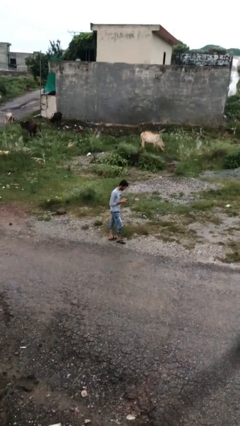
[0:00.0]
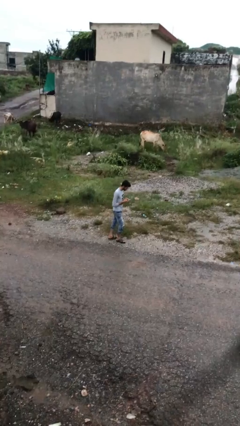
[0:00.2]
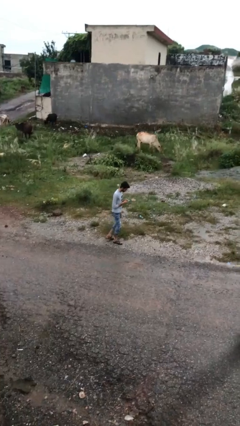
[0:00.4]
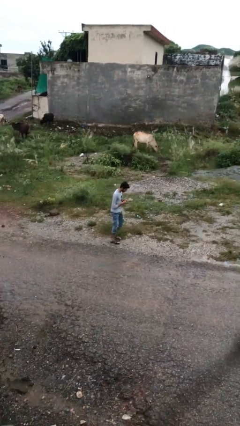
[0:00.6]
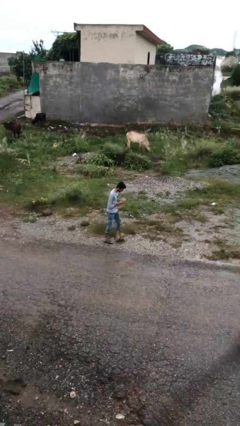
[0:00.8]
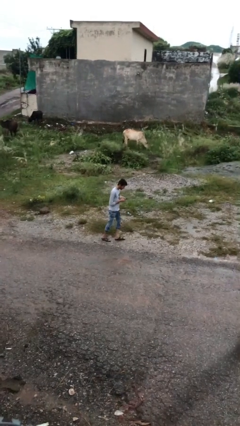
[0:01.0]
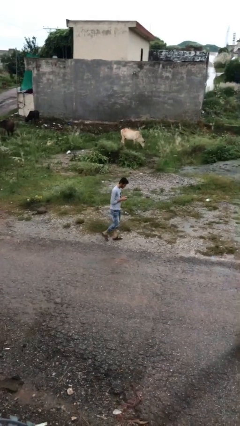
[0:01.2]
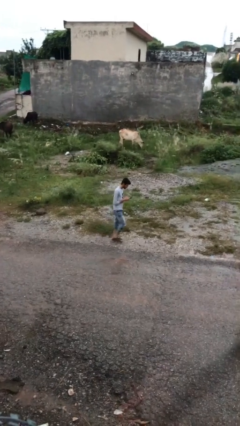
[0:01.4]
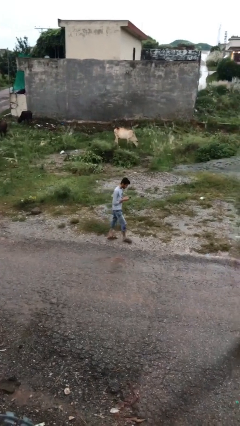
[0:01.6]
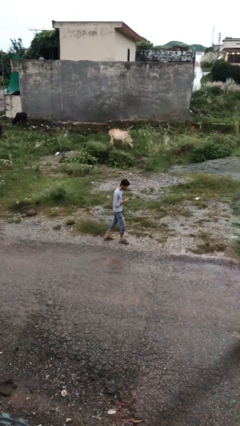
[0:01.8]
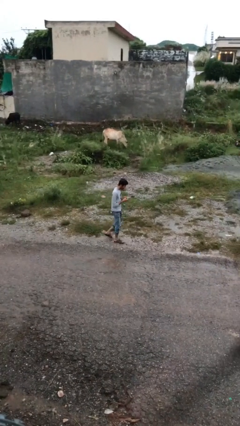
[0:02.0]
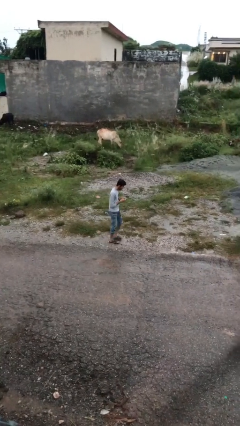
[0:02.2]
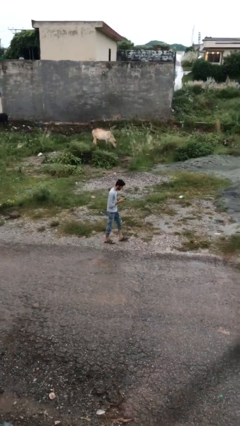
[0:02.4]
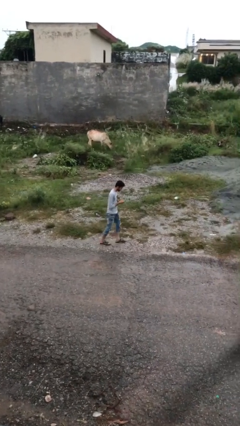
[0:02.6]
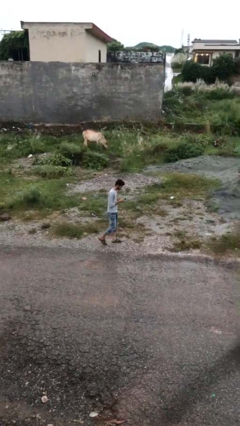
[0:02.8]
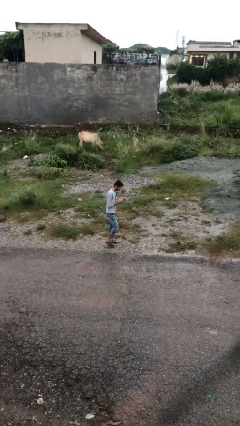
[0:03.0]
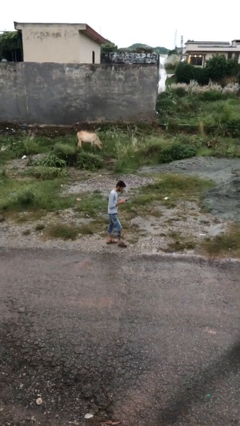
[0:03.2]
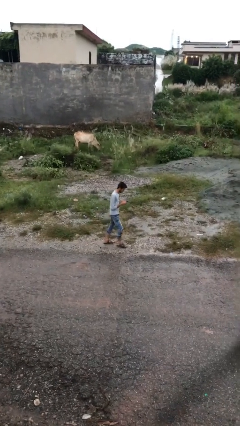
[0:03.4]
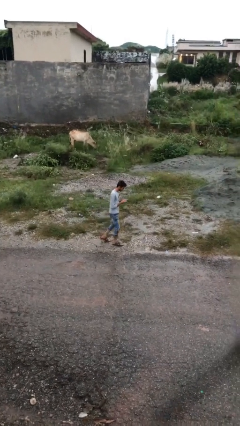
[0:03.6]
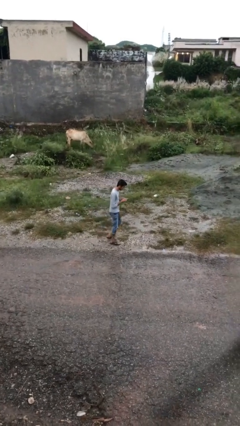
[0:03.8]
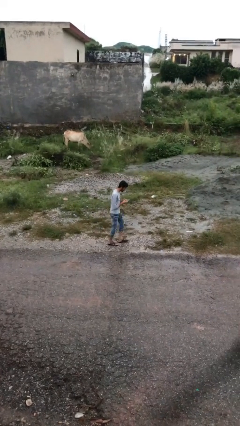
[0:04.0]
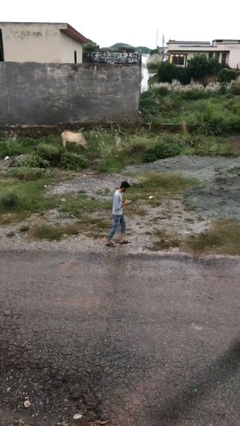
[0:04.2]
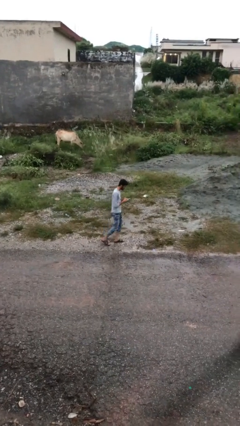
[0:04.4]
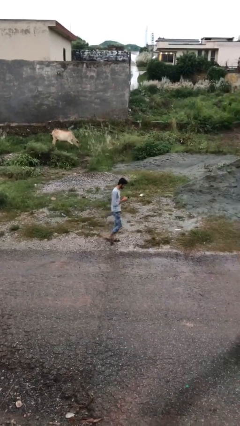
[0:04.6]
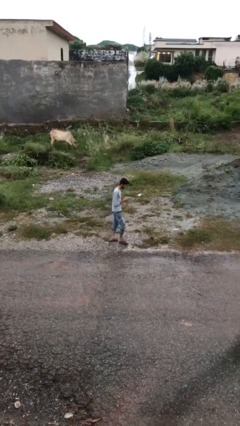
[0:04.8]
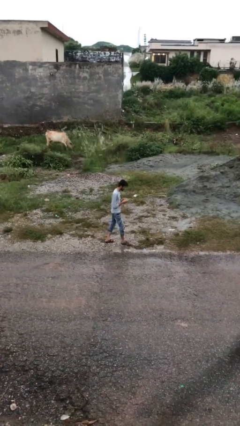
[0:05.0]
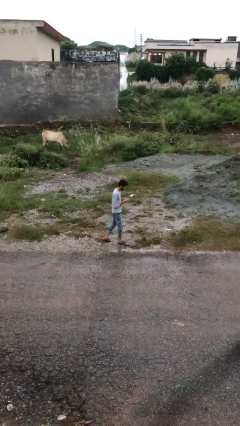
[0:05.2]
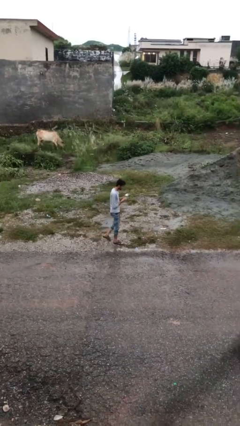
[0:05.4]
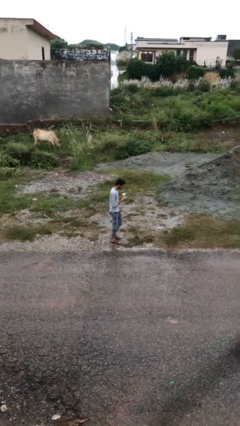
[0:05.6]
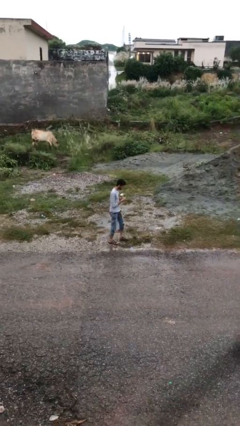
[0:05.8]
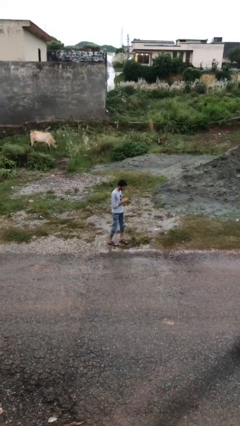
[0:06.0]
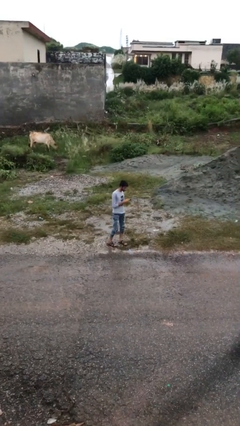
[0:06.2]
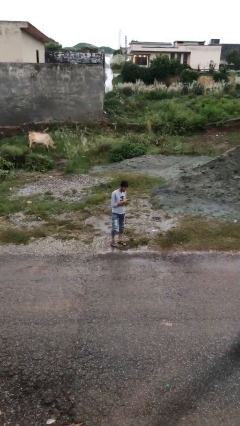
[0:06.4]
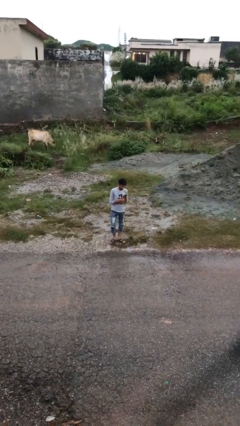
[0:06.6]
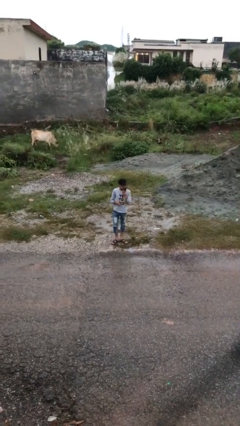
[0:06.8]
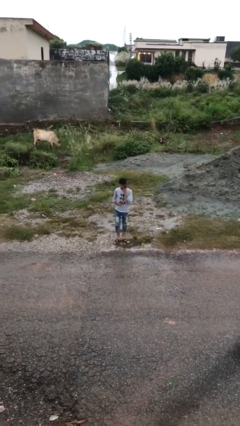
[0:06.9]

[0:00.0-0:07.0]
person texts on phone

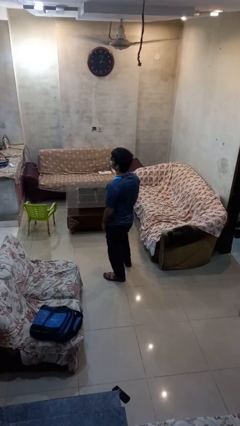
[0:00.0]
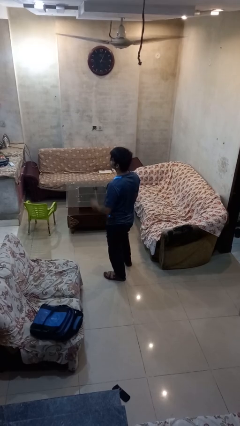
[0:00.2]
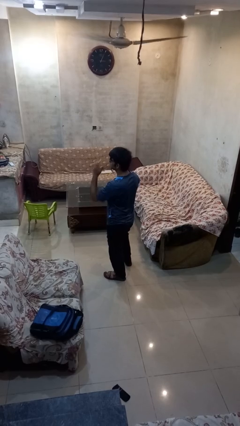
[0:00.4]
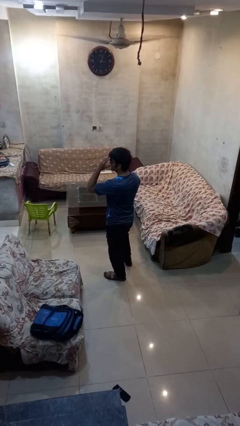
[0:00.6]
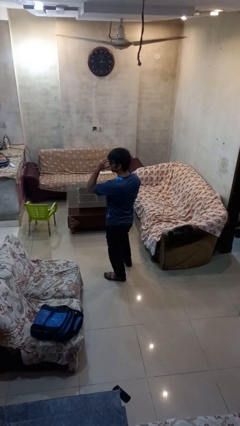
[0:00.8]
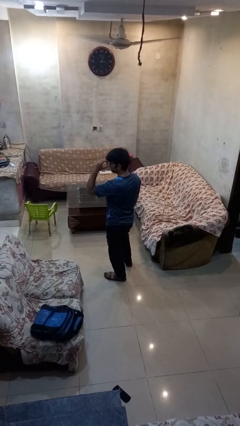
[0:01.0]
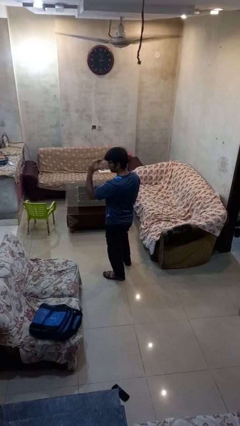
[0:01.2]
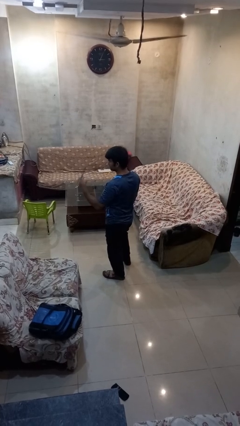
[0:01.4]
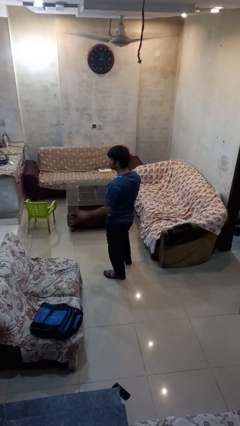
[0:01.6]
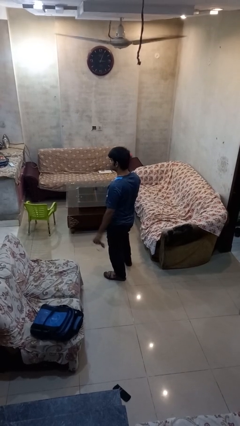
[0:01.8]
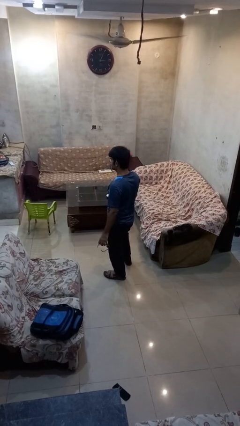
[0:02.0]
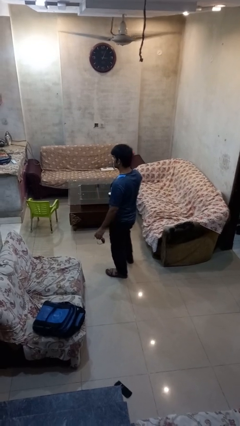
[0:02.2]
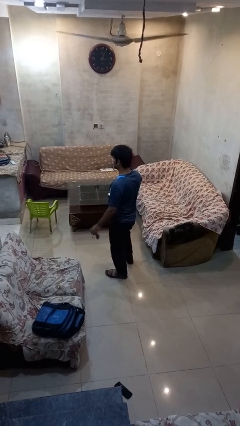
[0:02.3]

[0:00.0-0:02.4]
person takes off sunglasses

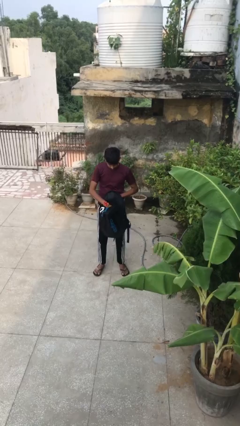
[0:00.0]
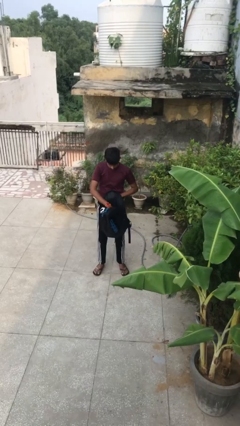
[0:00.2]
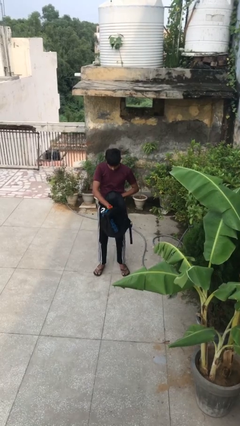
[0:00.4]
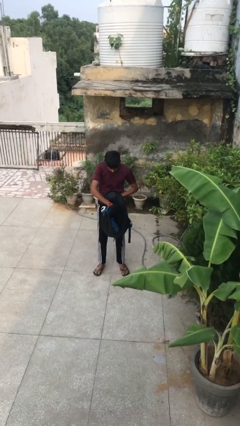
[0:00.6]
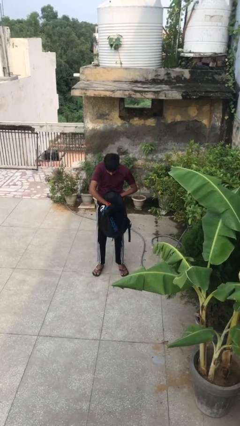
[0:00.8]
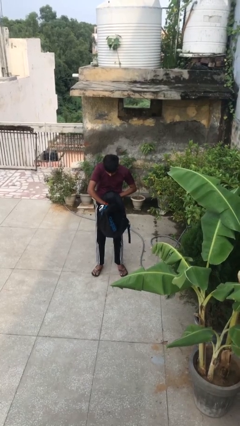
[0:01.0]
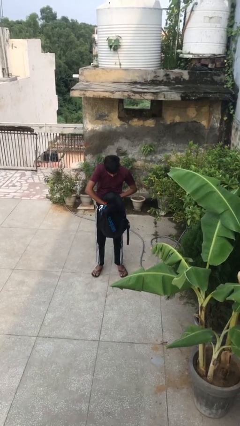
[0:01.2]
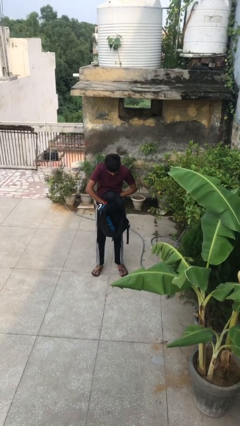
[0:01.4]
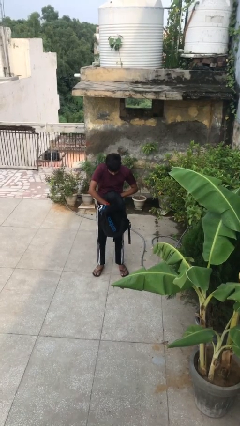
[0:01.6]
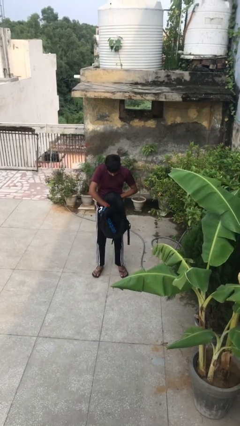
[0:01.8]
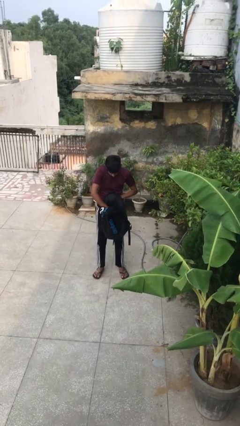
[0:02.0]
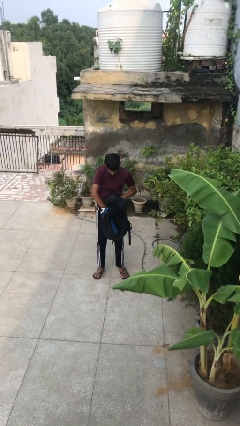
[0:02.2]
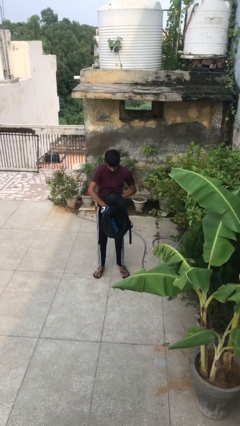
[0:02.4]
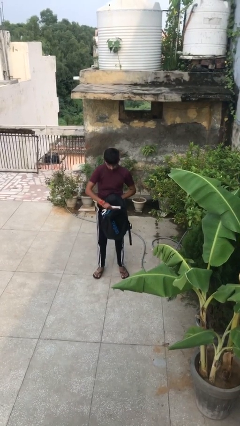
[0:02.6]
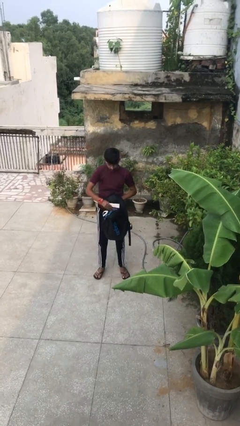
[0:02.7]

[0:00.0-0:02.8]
person searches in backpack

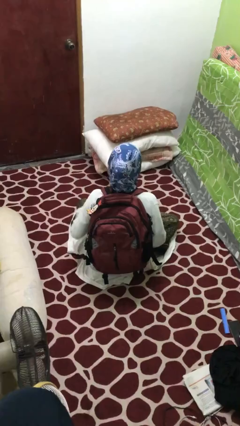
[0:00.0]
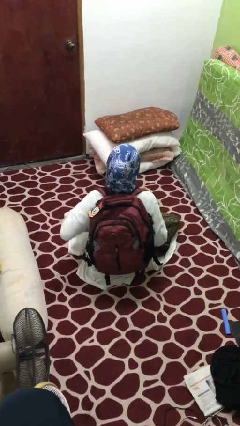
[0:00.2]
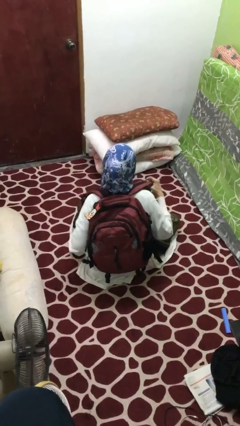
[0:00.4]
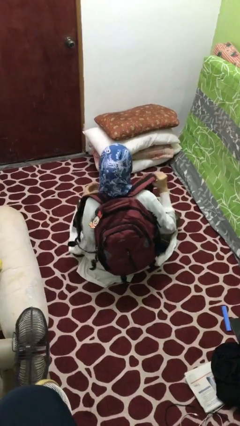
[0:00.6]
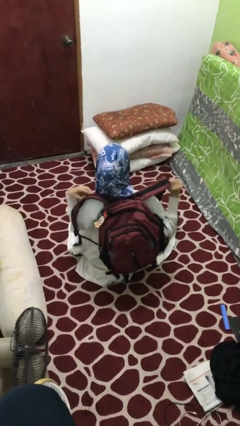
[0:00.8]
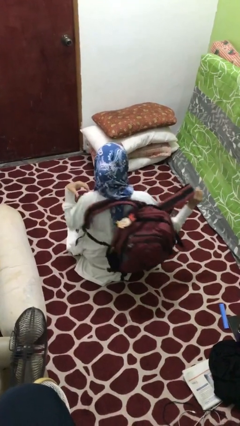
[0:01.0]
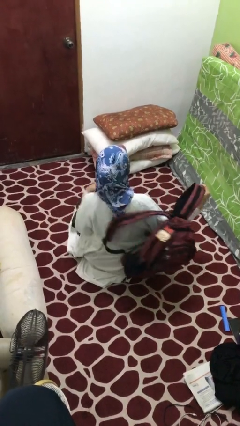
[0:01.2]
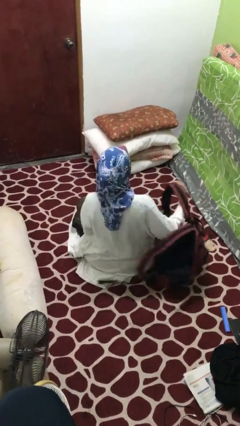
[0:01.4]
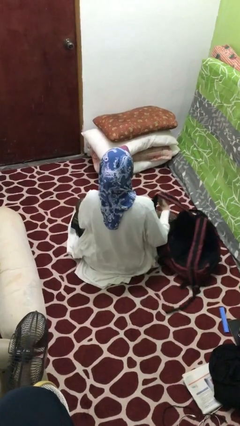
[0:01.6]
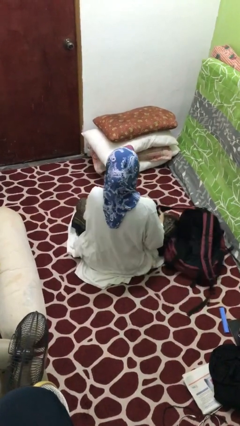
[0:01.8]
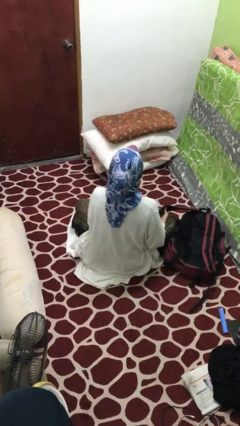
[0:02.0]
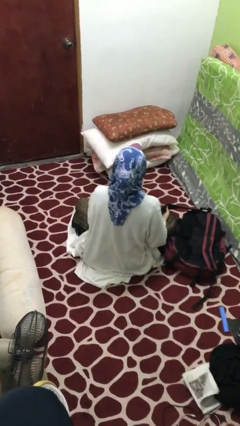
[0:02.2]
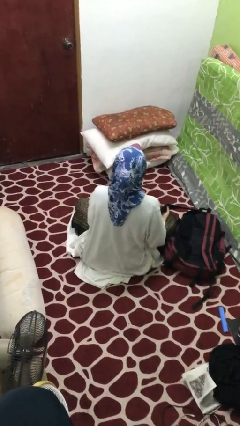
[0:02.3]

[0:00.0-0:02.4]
person takes off backpack

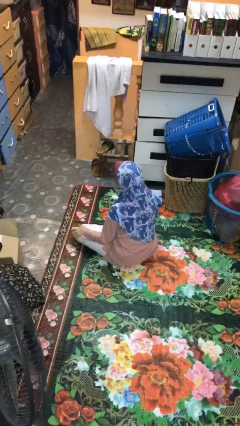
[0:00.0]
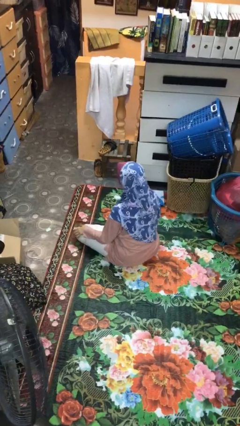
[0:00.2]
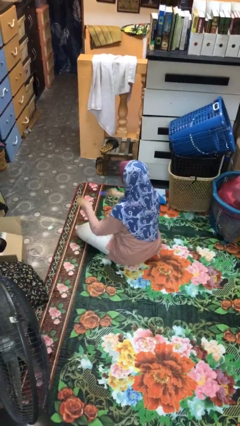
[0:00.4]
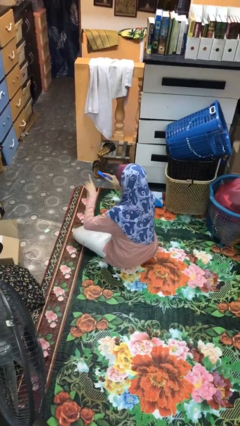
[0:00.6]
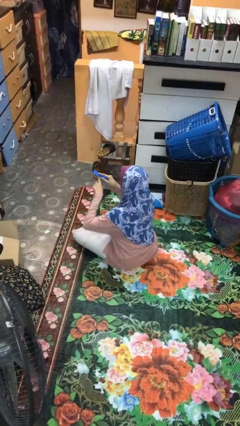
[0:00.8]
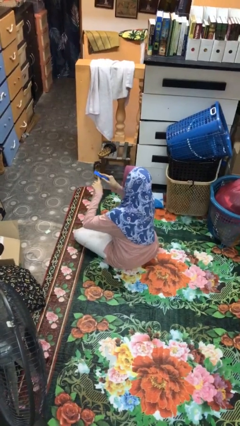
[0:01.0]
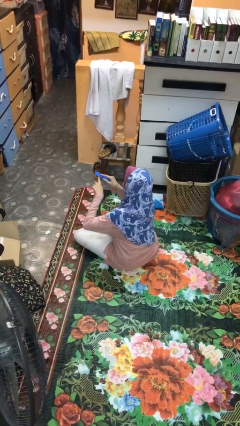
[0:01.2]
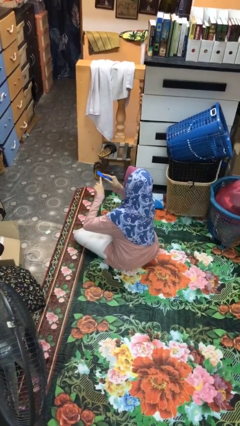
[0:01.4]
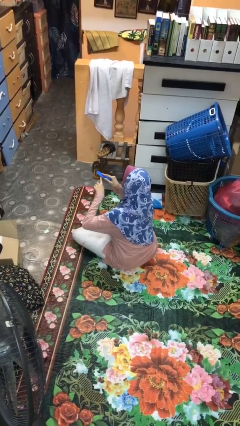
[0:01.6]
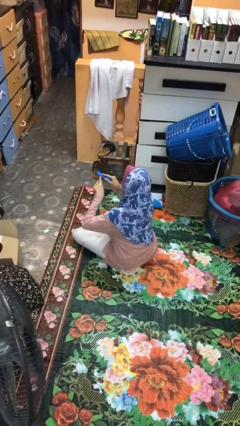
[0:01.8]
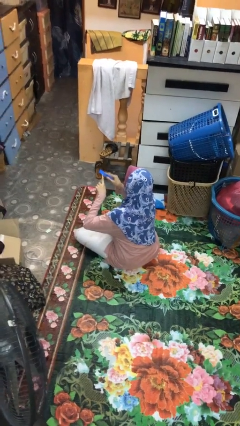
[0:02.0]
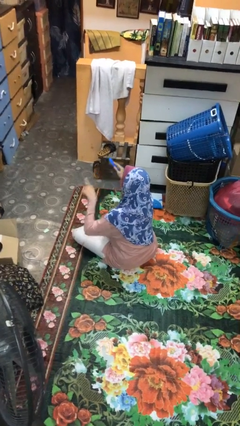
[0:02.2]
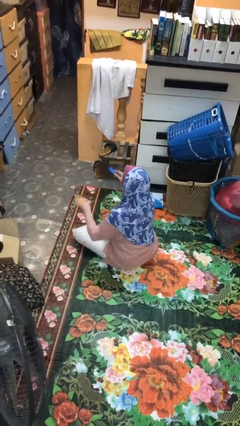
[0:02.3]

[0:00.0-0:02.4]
person files fingernails
